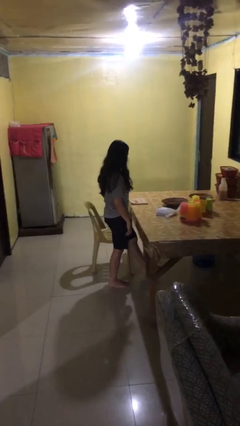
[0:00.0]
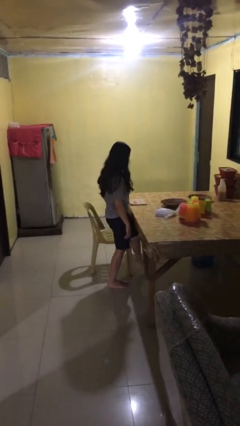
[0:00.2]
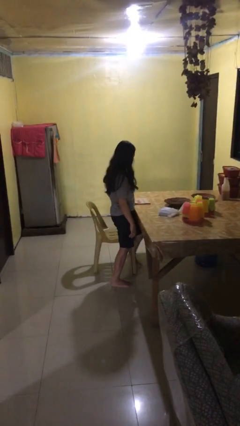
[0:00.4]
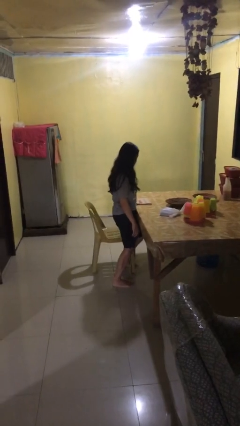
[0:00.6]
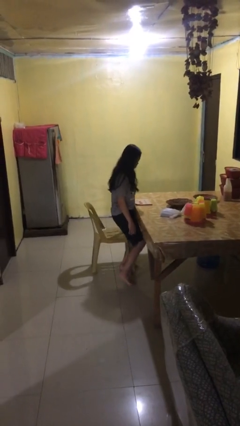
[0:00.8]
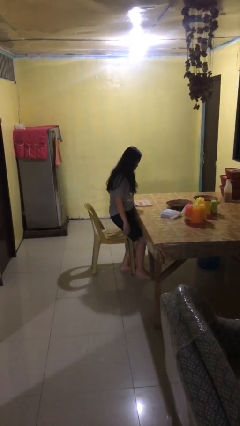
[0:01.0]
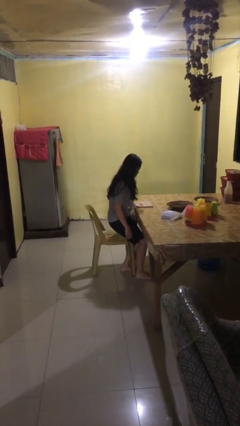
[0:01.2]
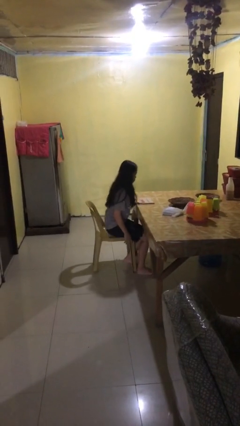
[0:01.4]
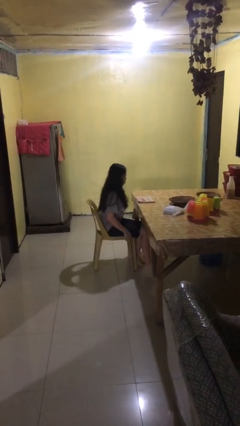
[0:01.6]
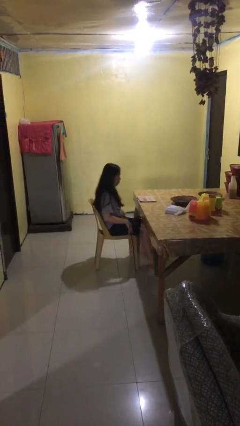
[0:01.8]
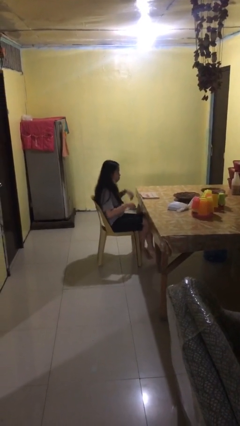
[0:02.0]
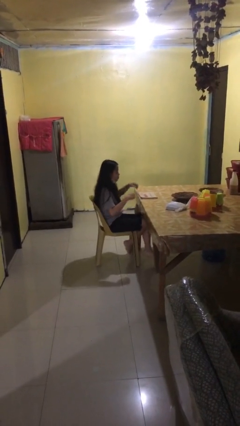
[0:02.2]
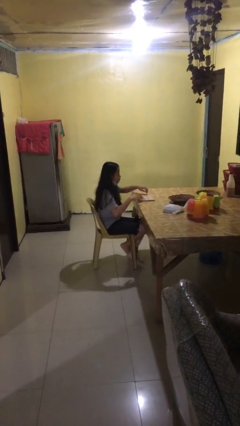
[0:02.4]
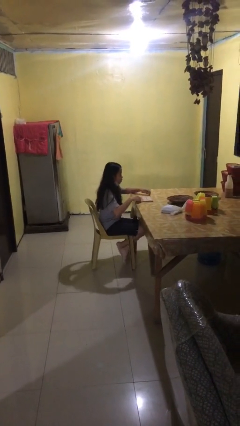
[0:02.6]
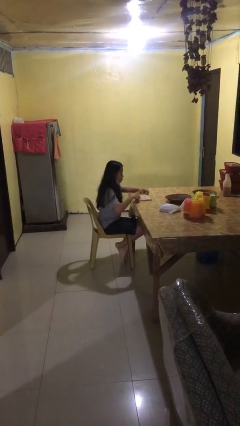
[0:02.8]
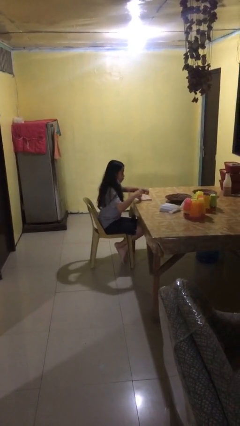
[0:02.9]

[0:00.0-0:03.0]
person sits down

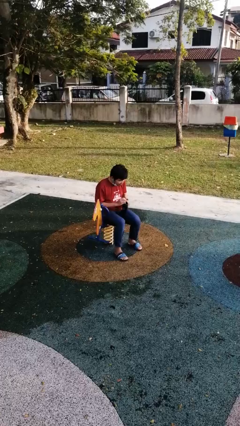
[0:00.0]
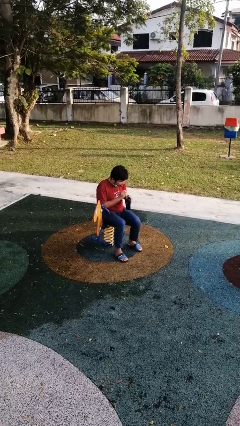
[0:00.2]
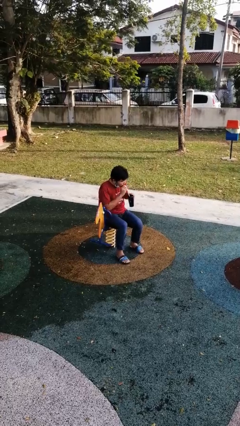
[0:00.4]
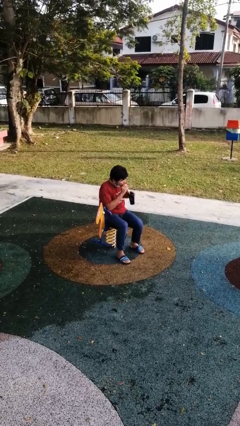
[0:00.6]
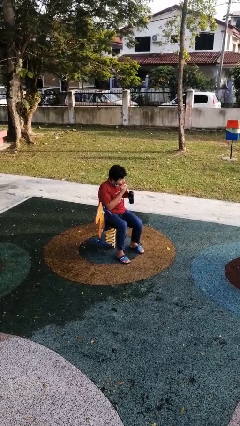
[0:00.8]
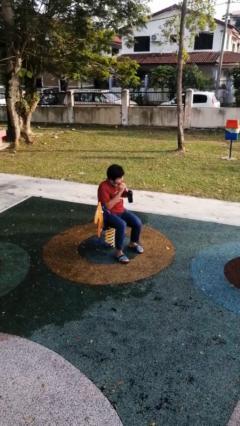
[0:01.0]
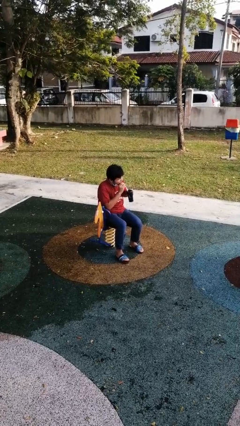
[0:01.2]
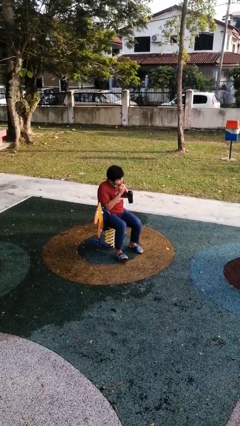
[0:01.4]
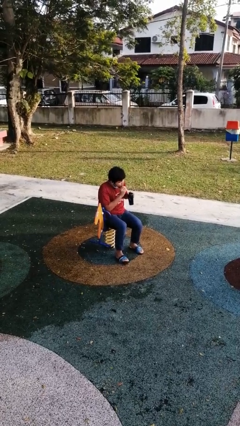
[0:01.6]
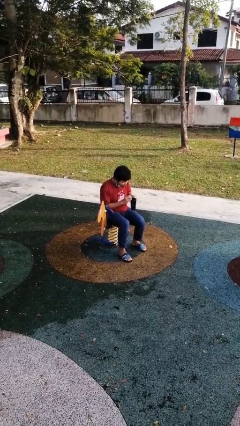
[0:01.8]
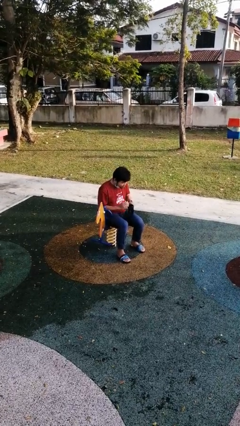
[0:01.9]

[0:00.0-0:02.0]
person drinks from straw

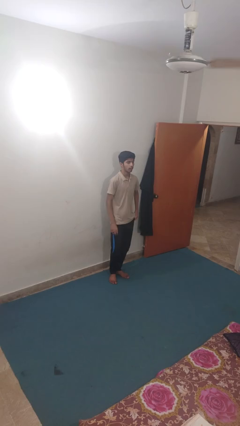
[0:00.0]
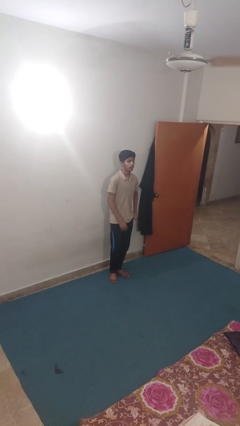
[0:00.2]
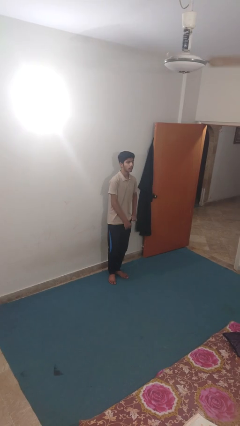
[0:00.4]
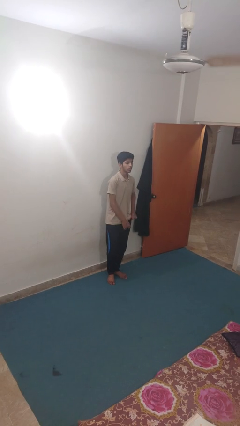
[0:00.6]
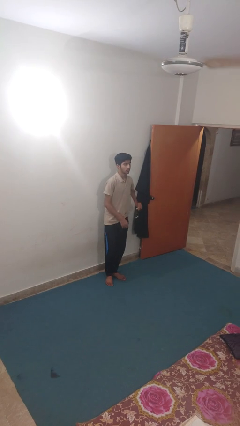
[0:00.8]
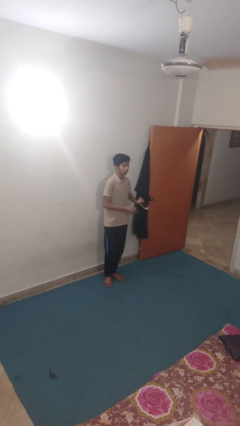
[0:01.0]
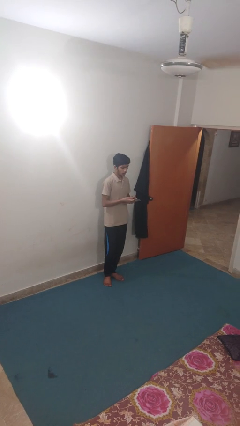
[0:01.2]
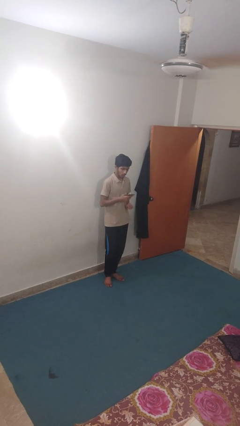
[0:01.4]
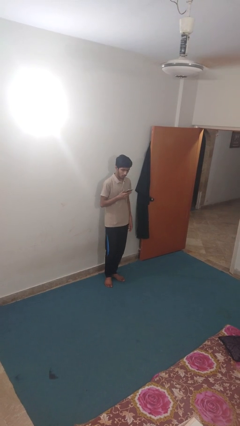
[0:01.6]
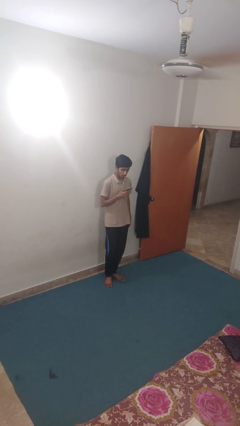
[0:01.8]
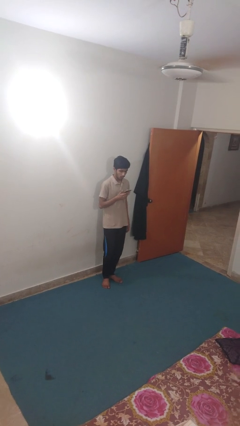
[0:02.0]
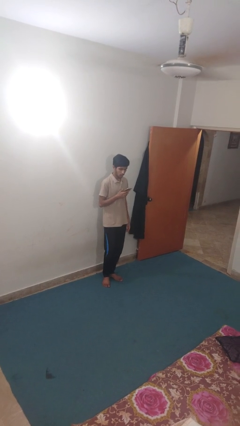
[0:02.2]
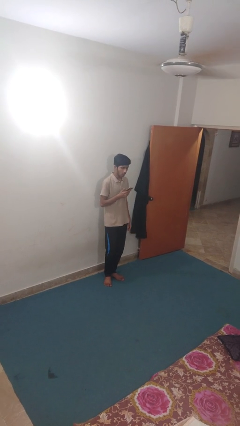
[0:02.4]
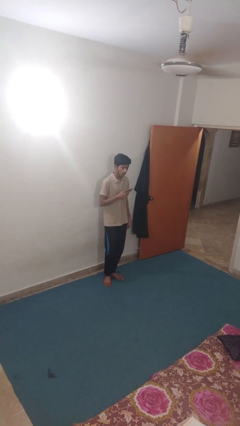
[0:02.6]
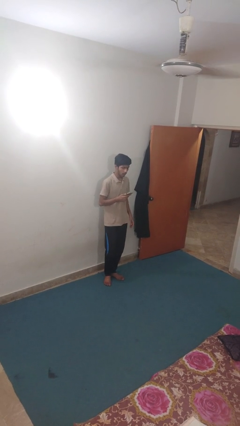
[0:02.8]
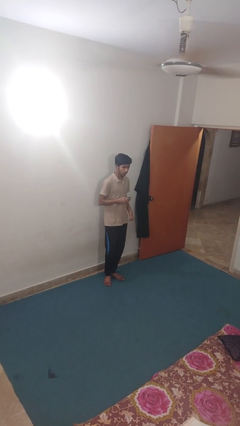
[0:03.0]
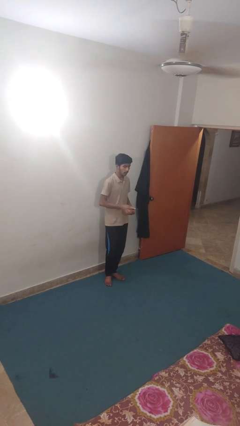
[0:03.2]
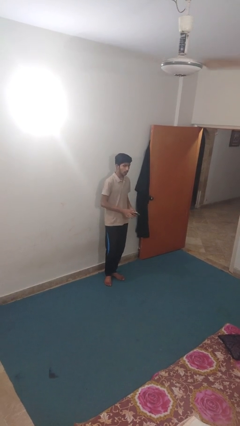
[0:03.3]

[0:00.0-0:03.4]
person takes phone from pocket

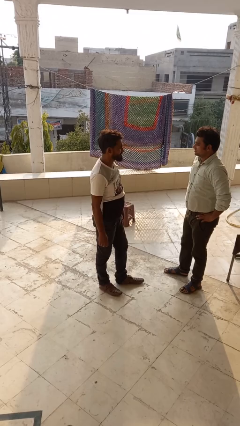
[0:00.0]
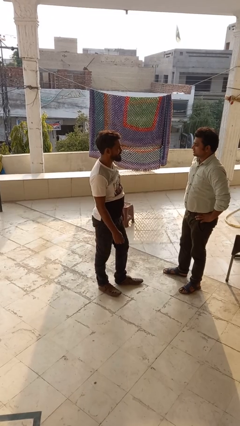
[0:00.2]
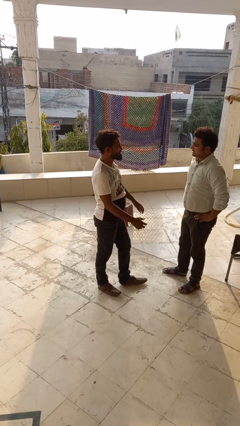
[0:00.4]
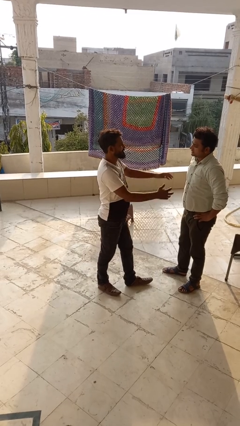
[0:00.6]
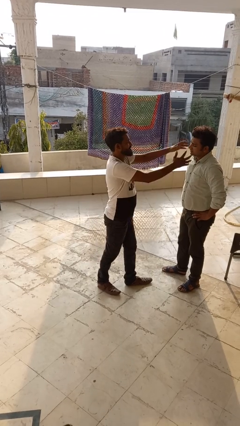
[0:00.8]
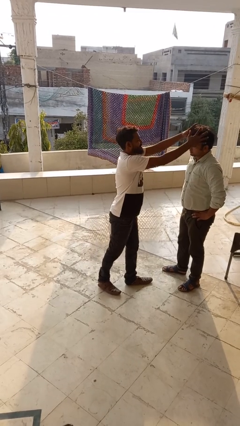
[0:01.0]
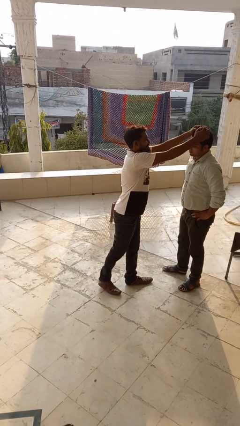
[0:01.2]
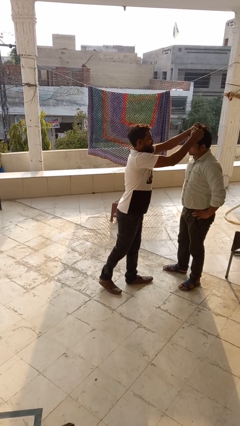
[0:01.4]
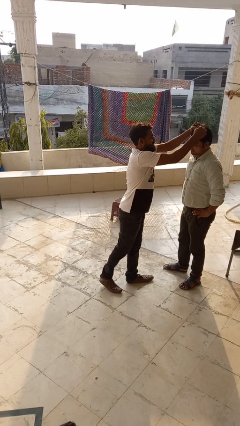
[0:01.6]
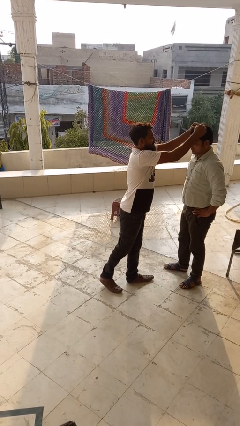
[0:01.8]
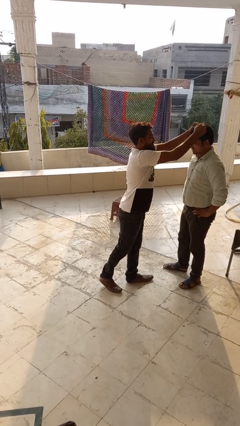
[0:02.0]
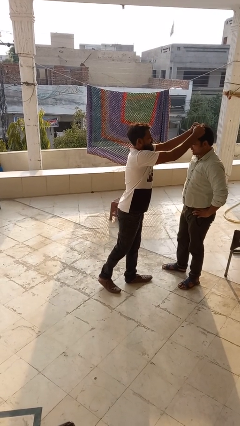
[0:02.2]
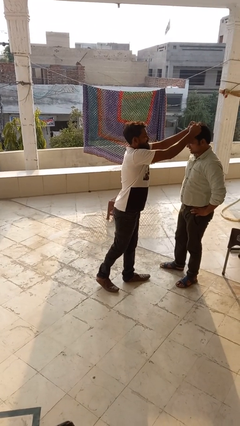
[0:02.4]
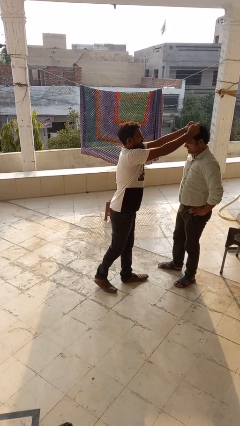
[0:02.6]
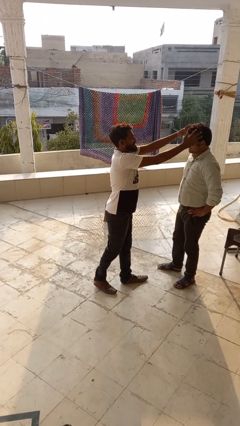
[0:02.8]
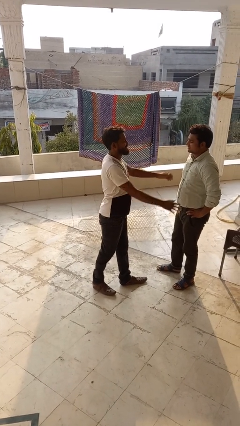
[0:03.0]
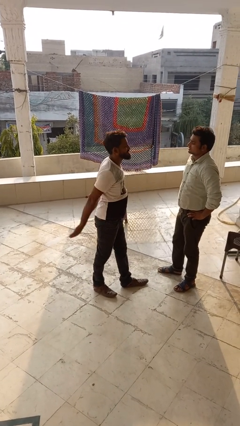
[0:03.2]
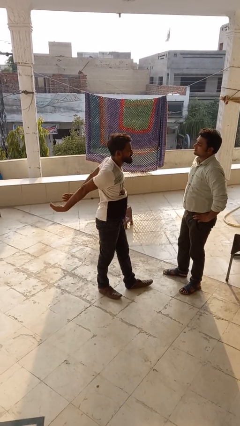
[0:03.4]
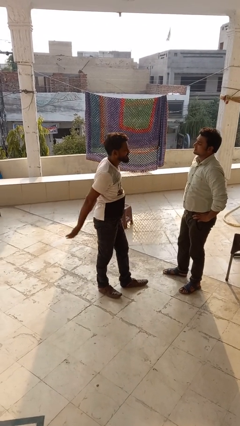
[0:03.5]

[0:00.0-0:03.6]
person grabs person by hair

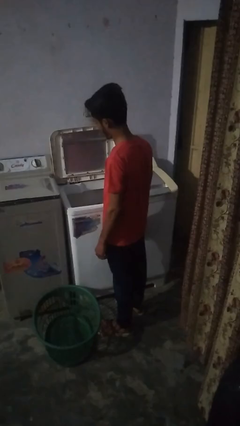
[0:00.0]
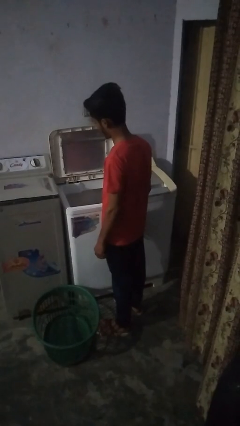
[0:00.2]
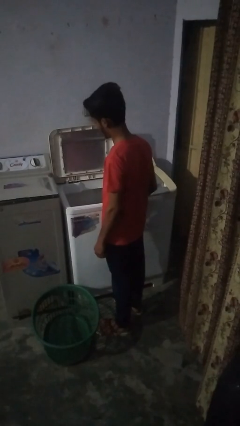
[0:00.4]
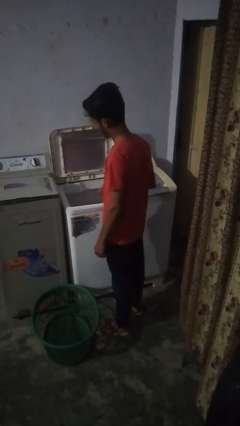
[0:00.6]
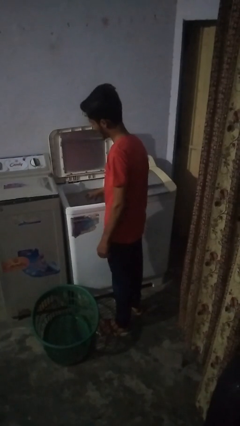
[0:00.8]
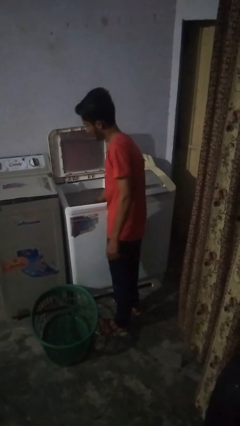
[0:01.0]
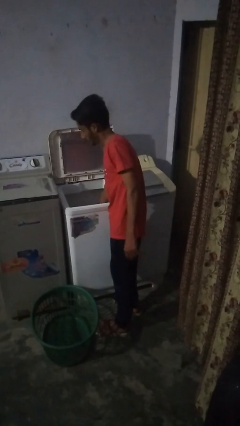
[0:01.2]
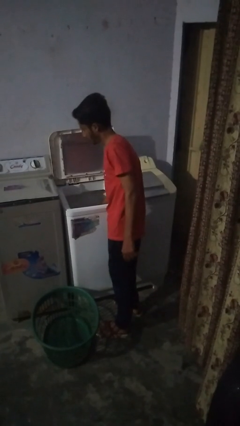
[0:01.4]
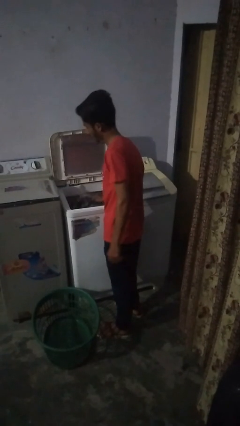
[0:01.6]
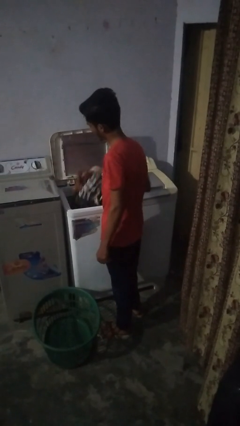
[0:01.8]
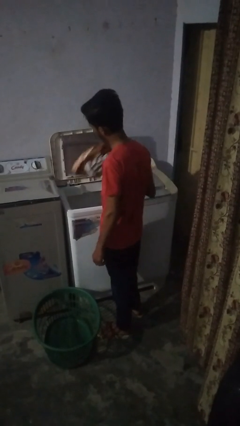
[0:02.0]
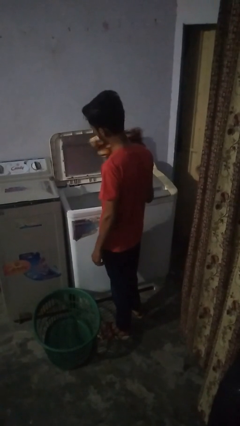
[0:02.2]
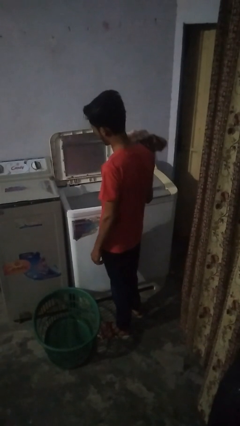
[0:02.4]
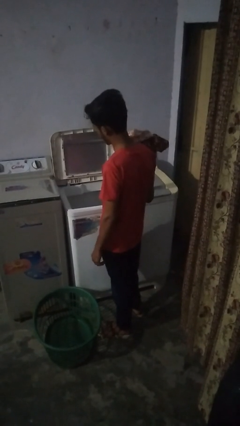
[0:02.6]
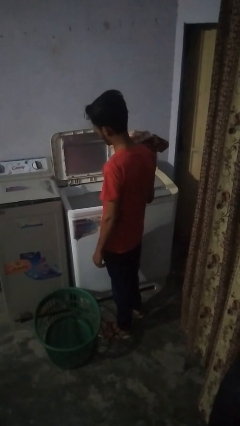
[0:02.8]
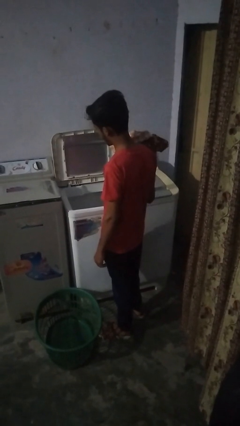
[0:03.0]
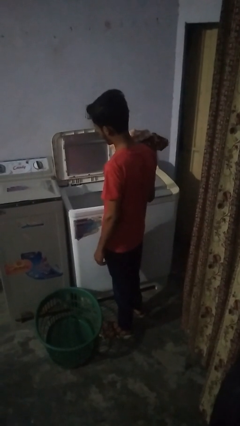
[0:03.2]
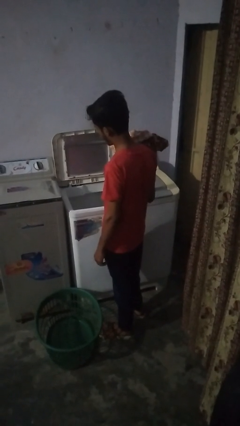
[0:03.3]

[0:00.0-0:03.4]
person unloads clotheswasher

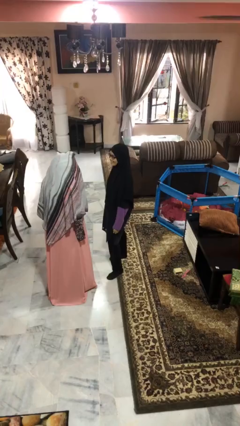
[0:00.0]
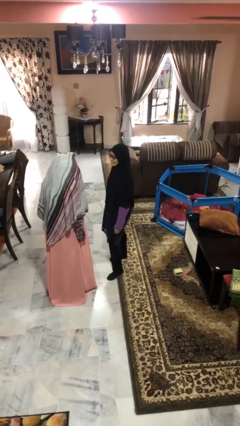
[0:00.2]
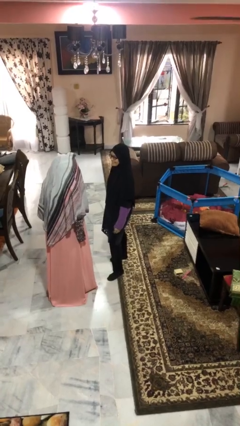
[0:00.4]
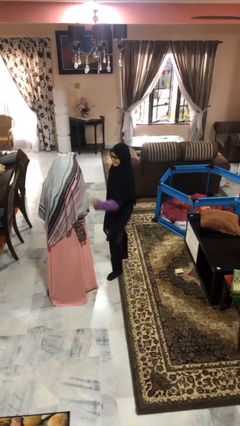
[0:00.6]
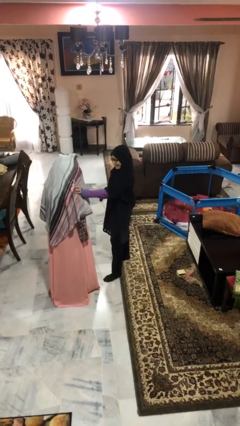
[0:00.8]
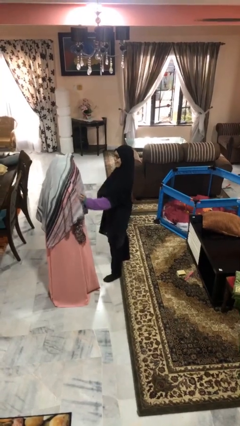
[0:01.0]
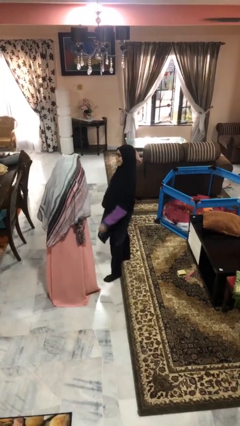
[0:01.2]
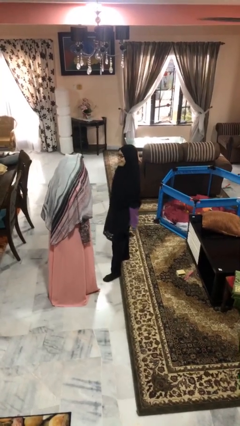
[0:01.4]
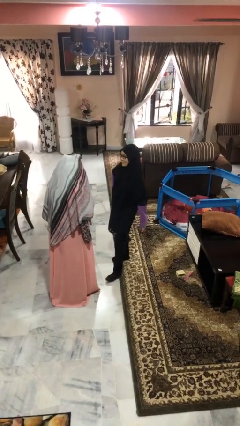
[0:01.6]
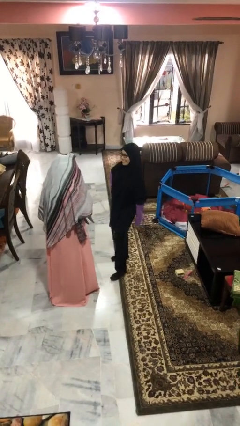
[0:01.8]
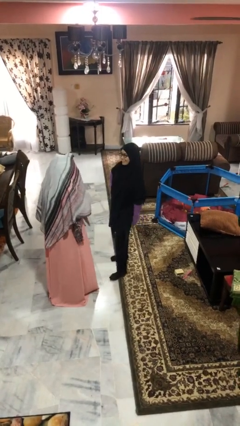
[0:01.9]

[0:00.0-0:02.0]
person shoves person
